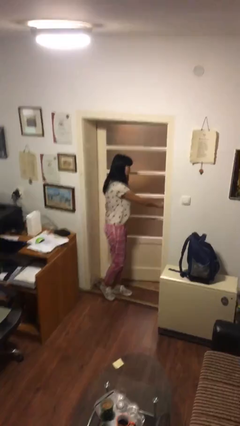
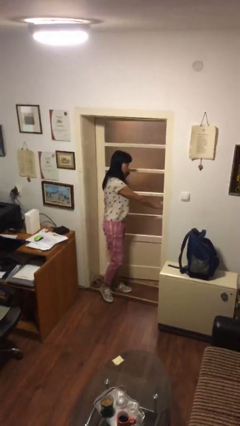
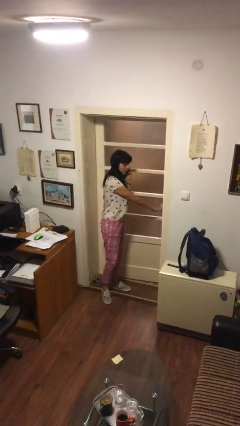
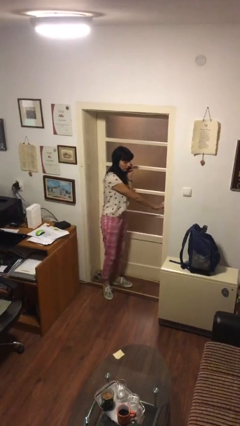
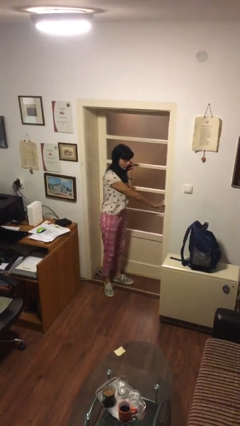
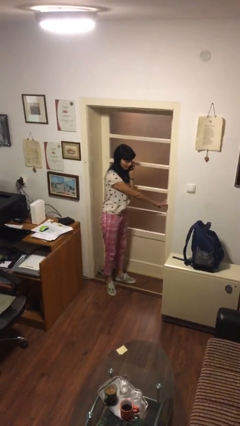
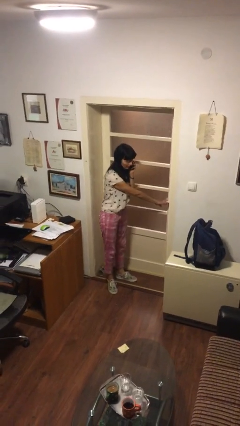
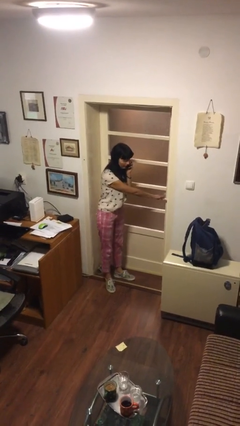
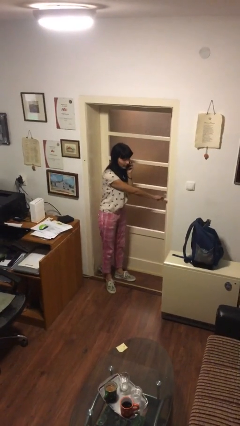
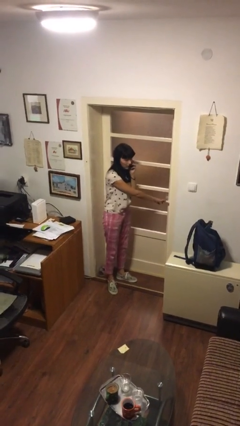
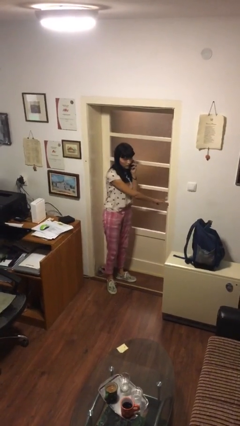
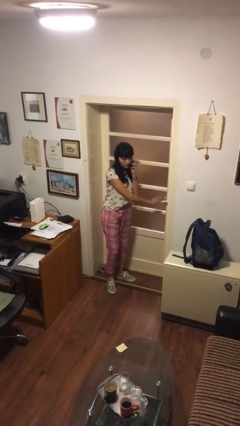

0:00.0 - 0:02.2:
person closes facility door

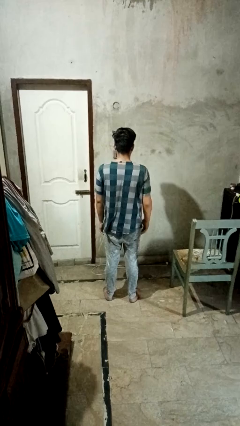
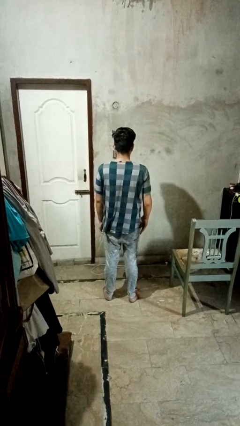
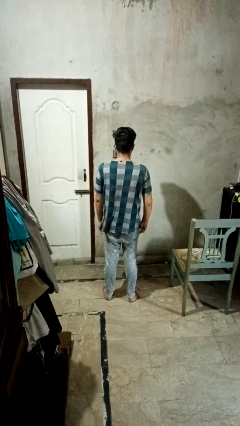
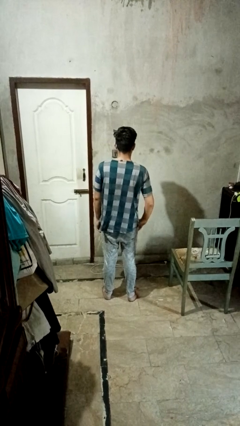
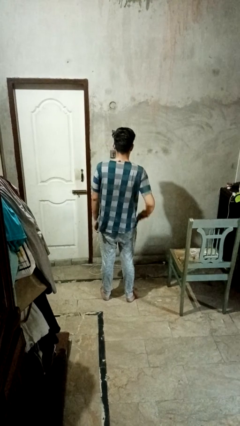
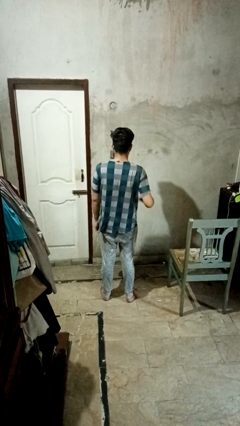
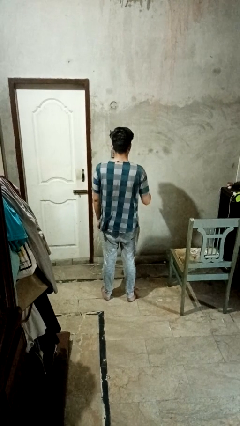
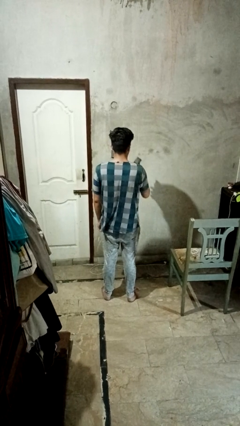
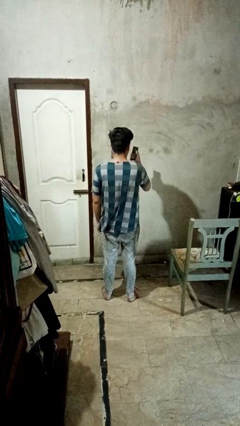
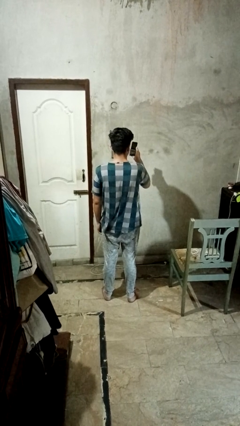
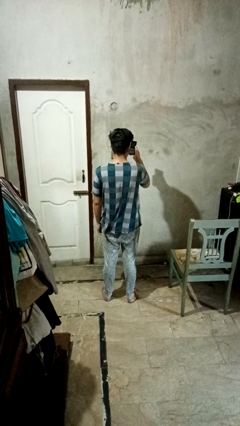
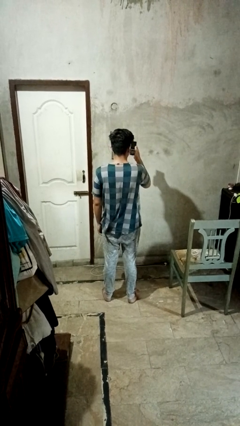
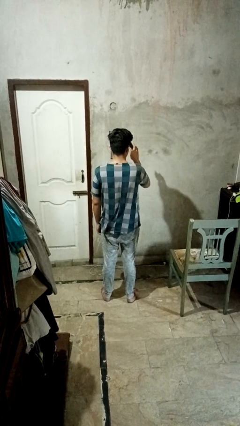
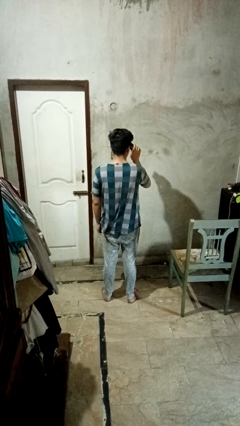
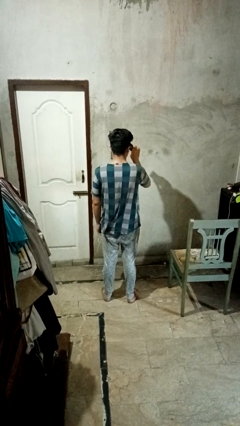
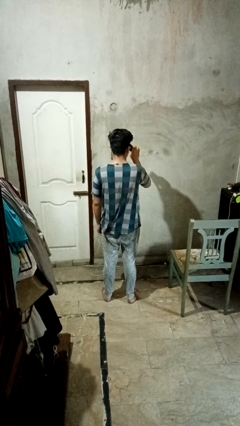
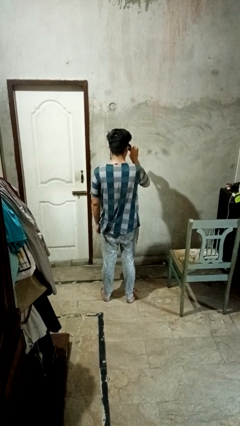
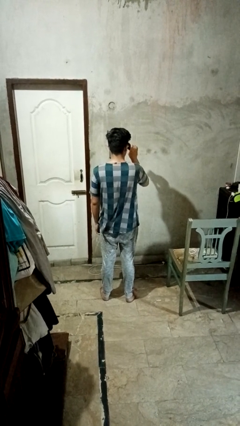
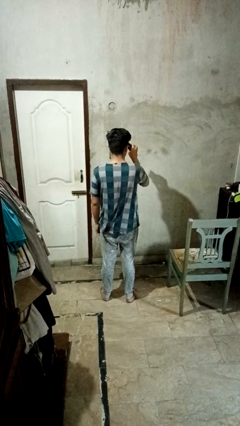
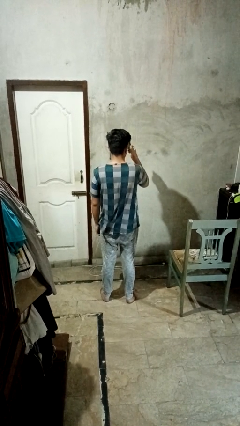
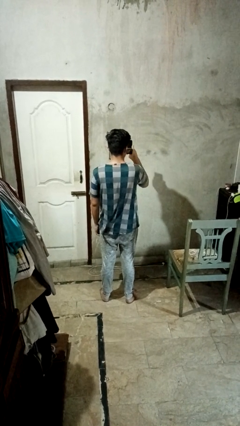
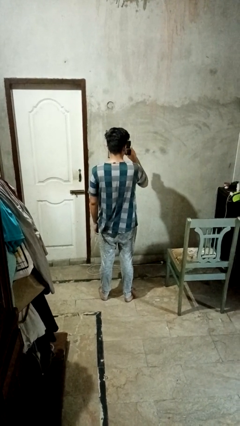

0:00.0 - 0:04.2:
person takes phone from pocket

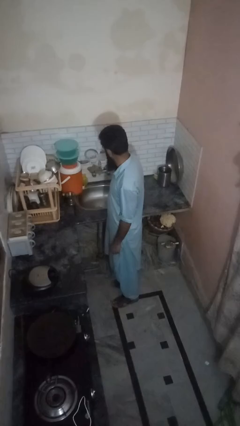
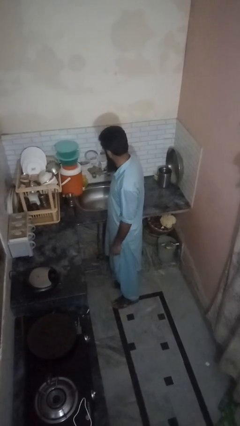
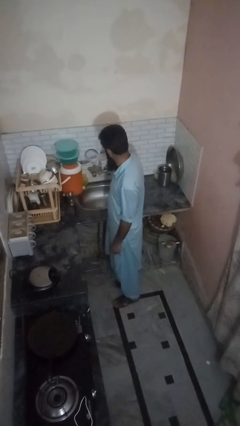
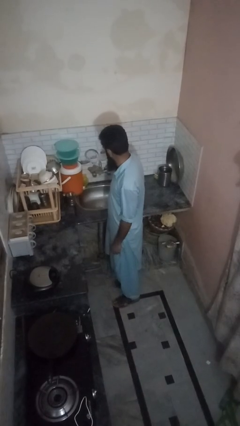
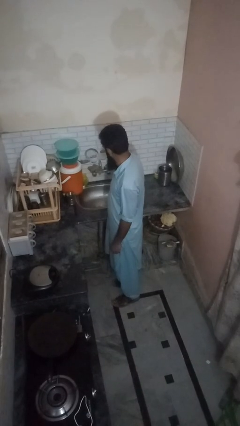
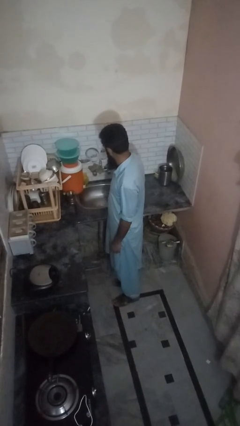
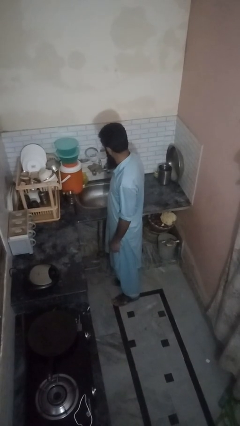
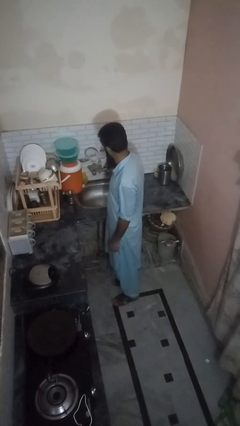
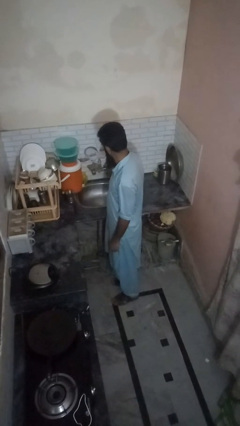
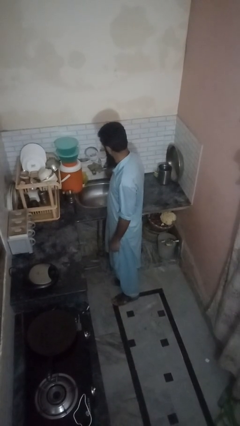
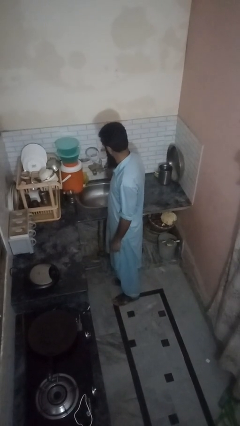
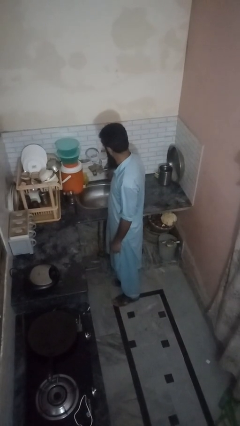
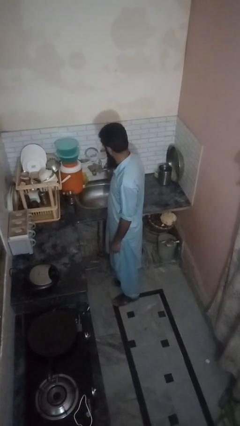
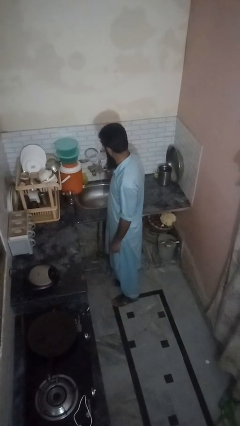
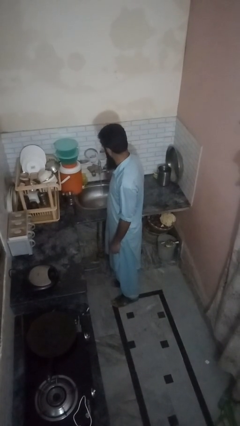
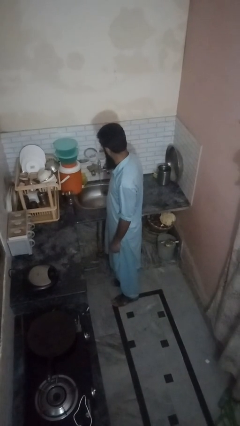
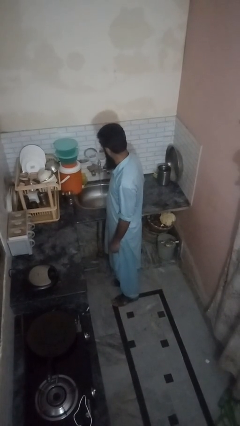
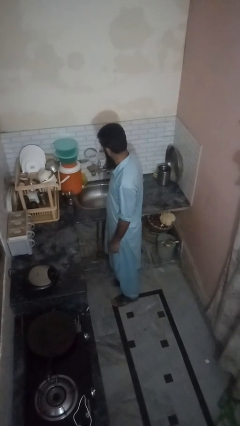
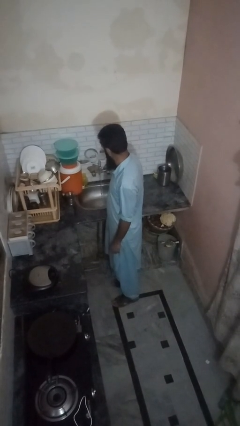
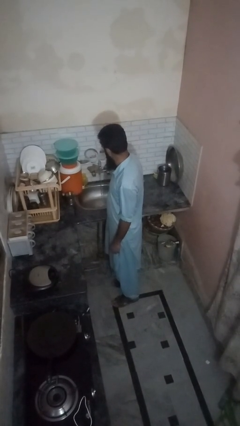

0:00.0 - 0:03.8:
person turns on faucet

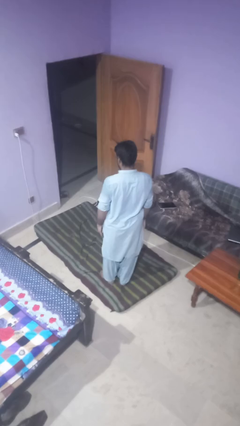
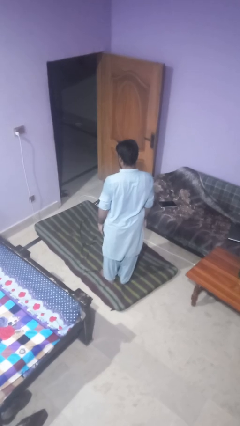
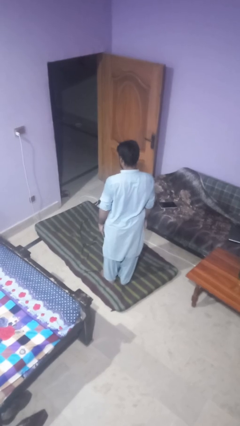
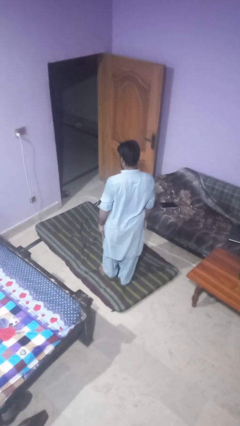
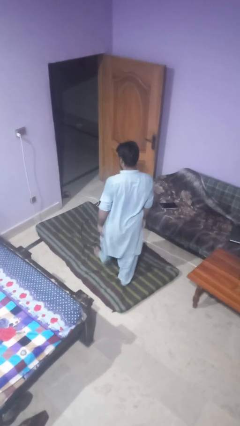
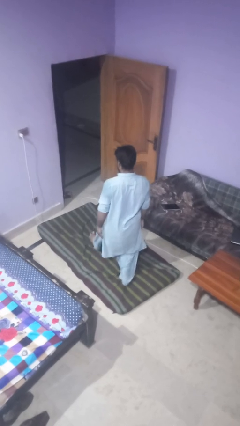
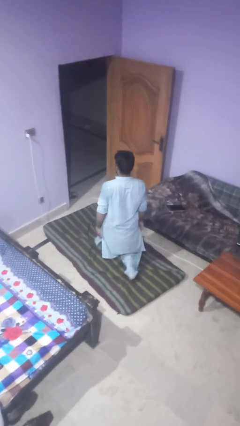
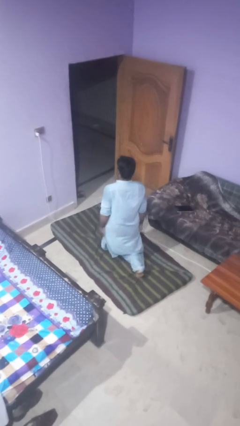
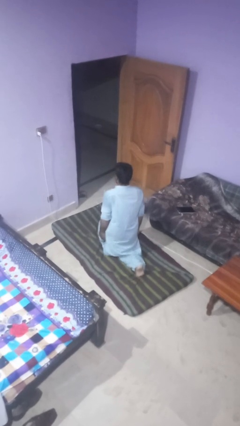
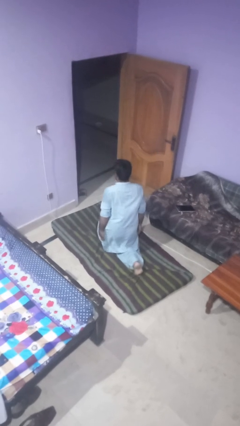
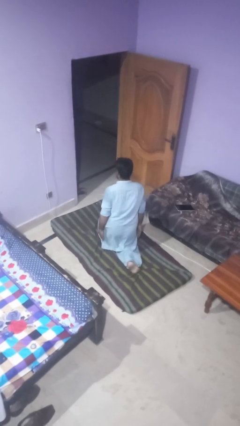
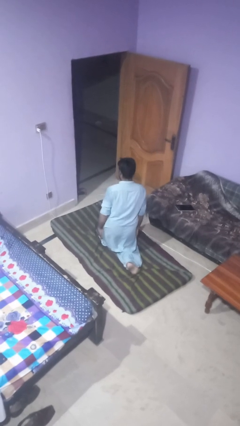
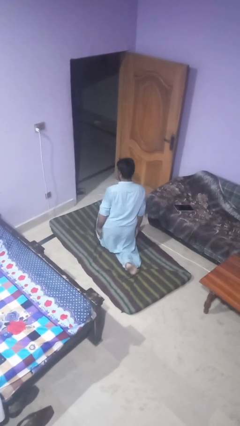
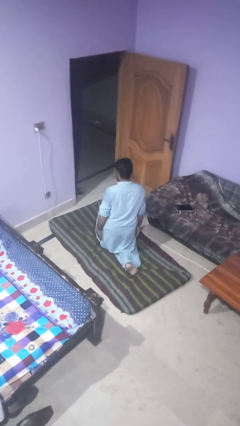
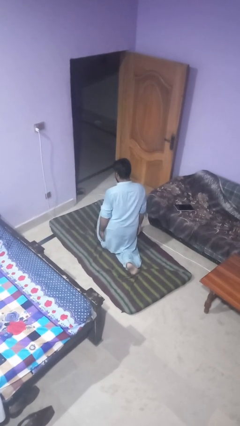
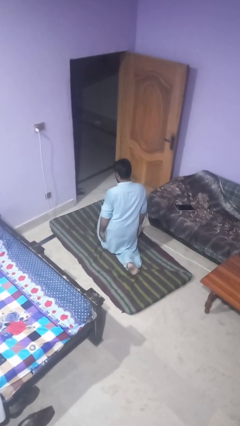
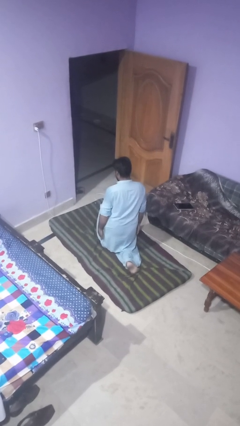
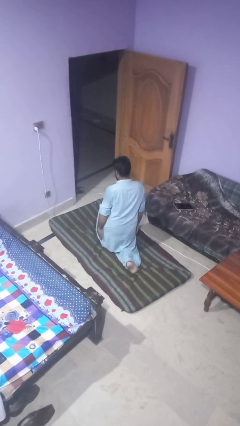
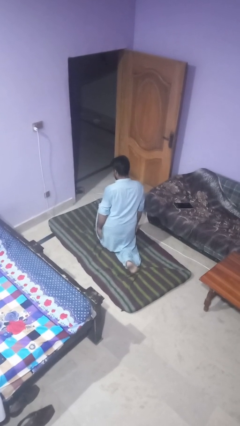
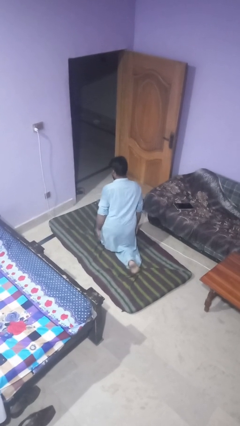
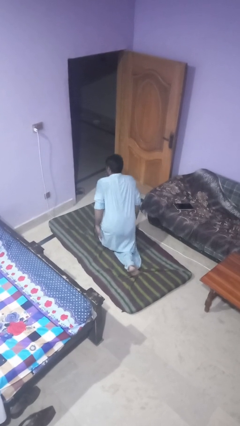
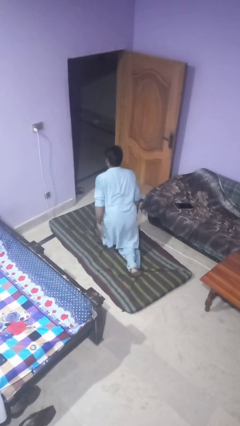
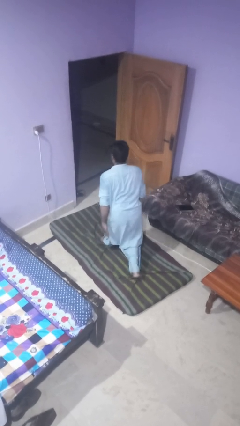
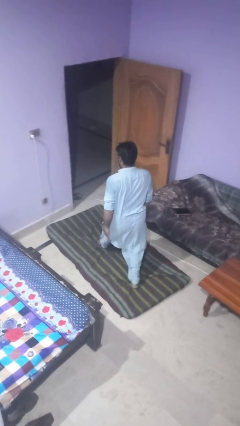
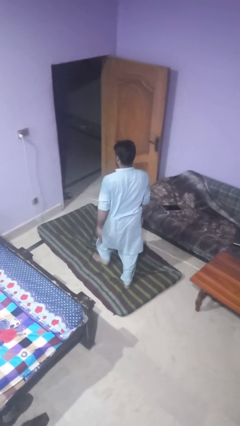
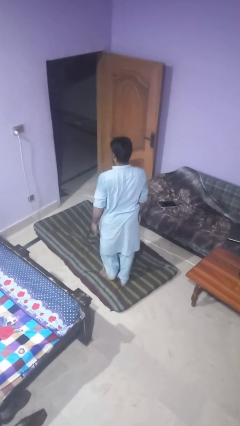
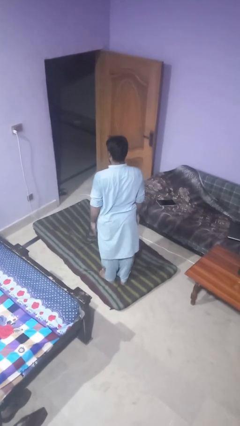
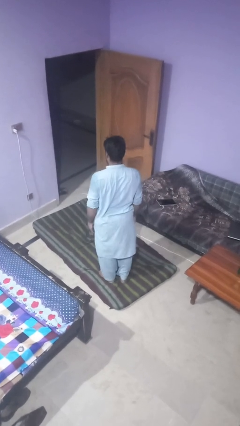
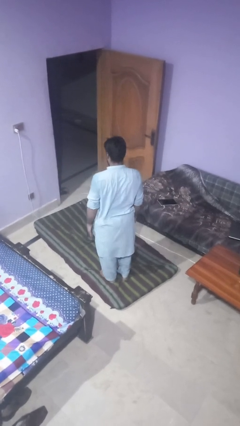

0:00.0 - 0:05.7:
person exercises with lunges

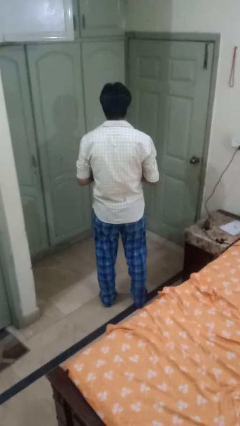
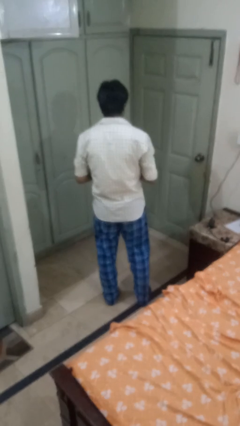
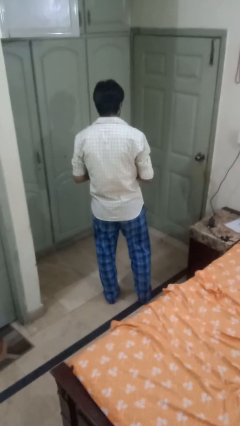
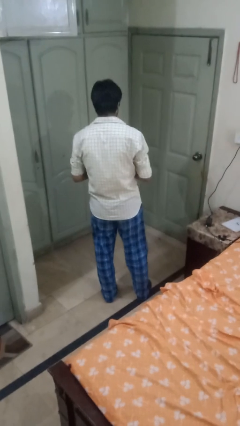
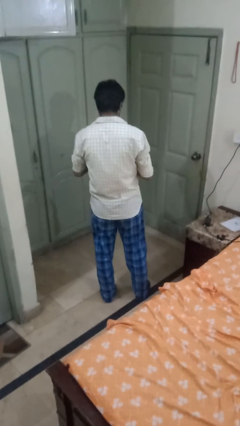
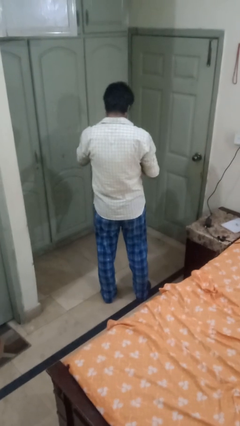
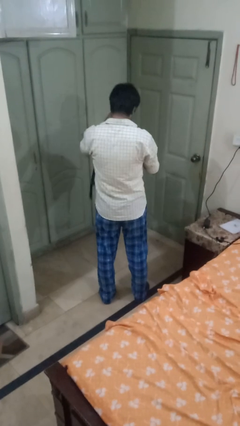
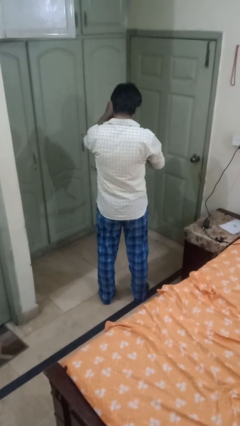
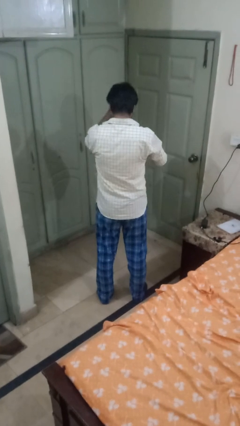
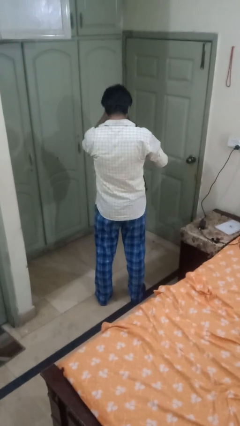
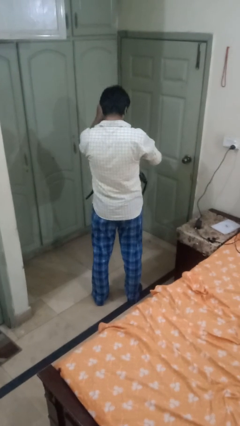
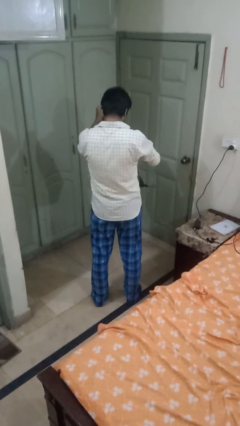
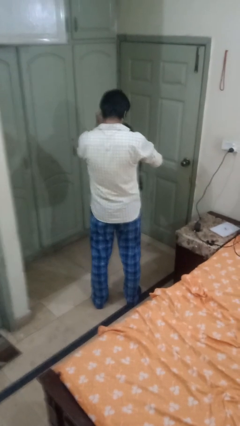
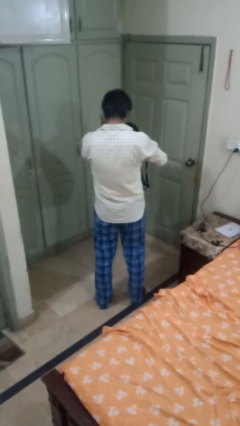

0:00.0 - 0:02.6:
person searches in backpack
